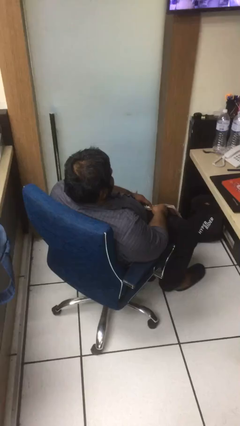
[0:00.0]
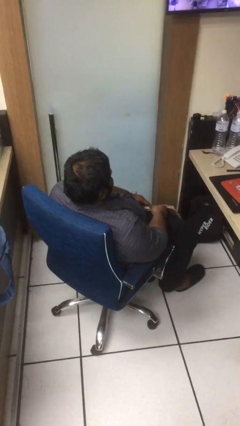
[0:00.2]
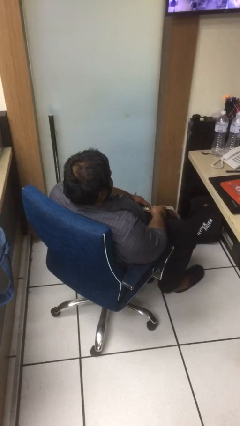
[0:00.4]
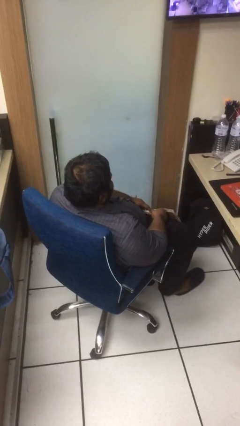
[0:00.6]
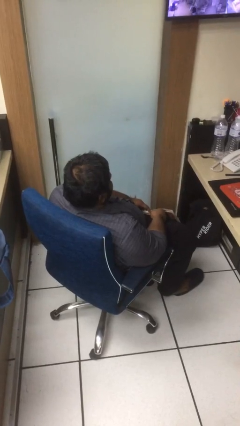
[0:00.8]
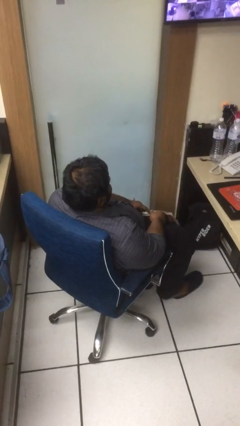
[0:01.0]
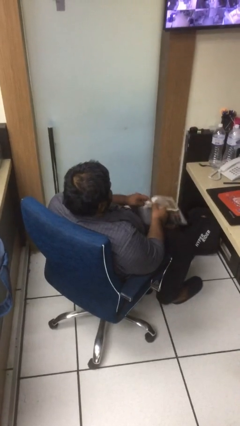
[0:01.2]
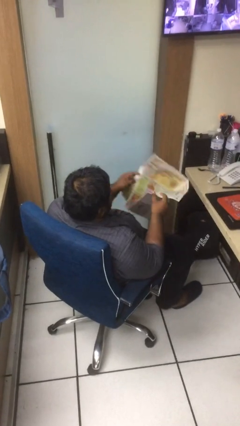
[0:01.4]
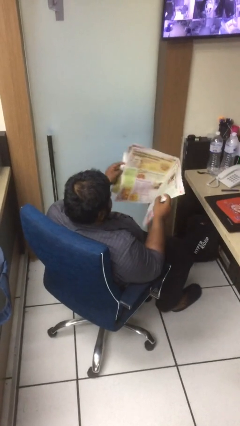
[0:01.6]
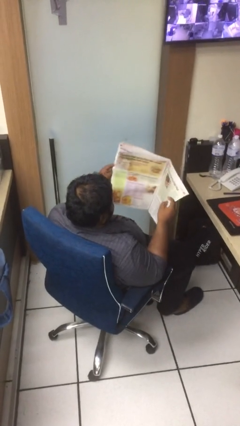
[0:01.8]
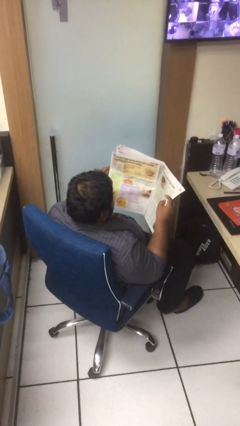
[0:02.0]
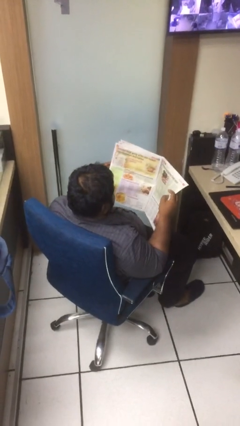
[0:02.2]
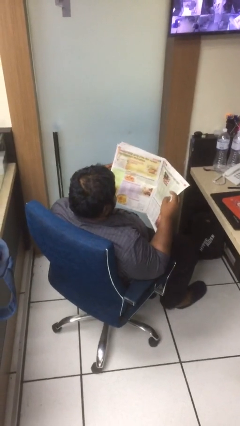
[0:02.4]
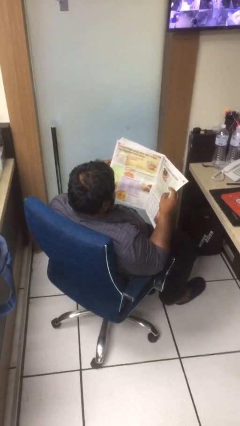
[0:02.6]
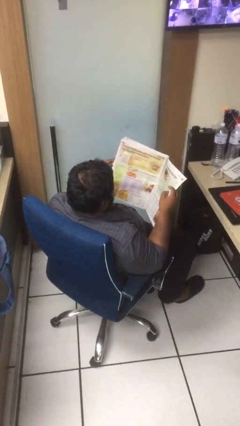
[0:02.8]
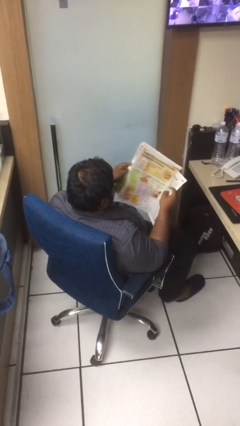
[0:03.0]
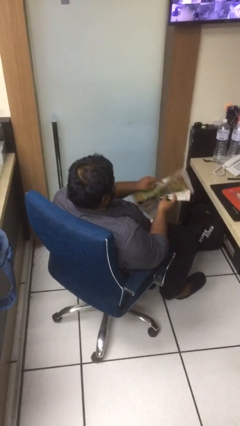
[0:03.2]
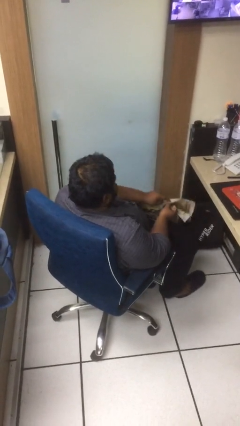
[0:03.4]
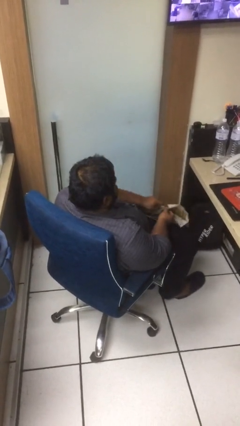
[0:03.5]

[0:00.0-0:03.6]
person reads newspaper

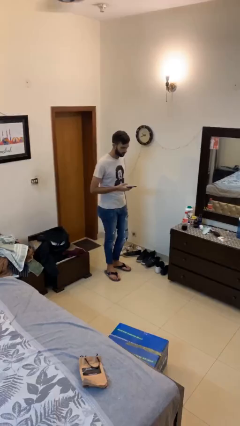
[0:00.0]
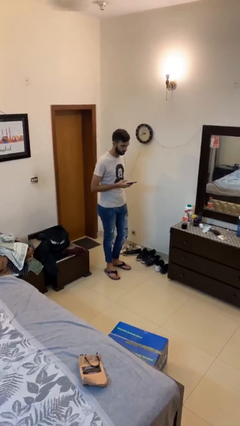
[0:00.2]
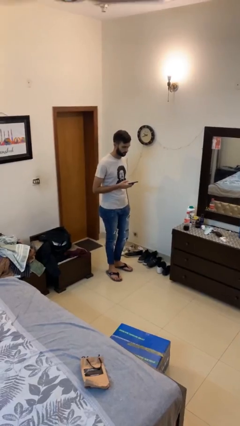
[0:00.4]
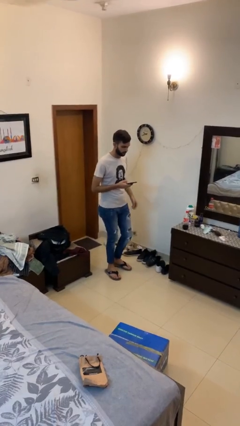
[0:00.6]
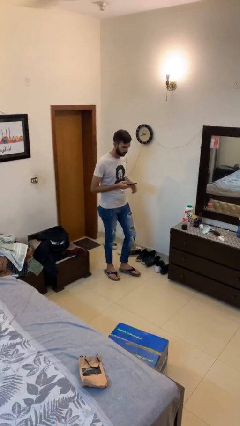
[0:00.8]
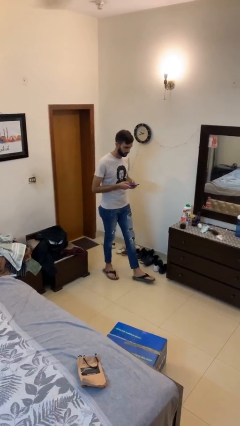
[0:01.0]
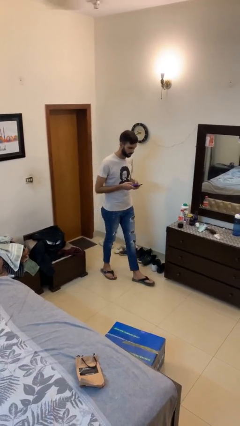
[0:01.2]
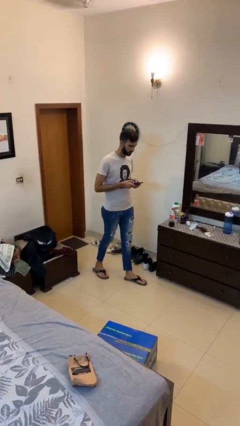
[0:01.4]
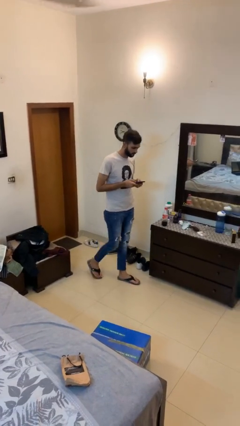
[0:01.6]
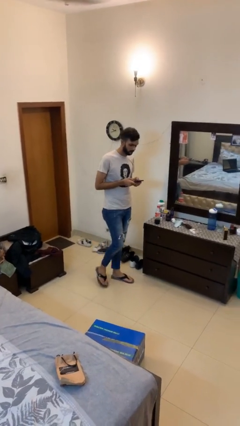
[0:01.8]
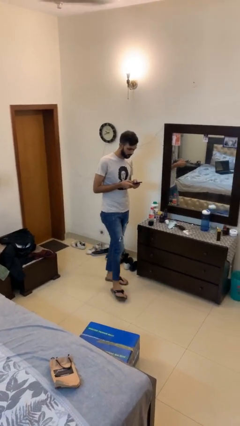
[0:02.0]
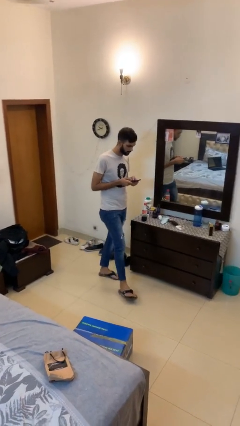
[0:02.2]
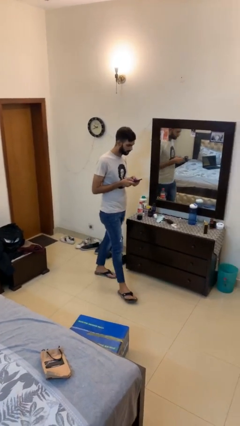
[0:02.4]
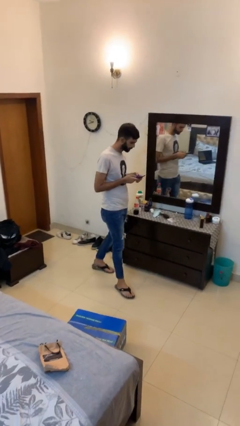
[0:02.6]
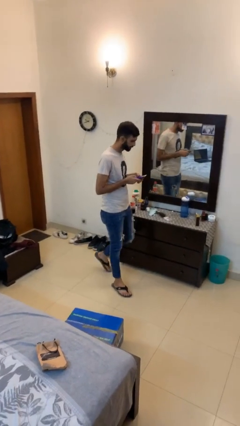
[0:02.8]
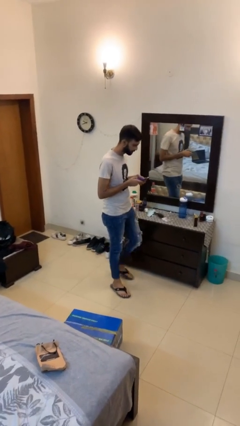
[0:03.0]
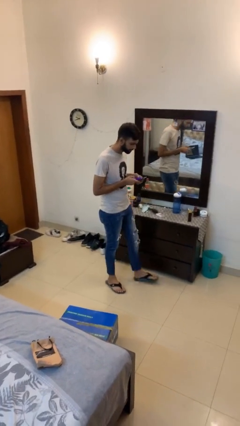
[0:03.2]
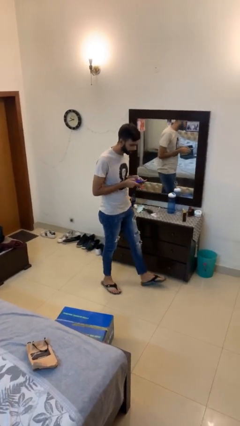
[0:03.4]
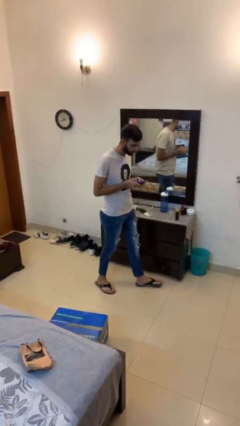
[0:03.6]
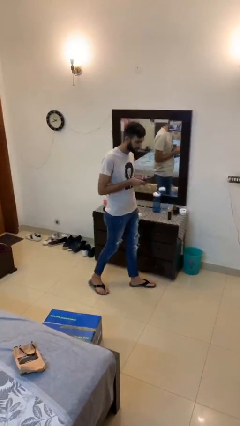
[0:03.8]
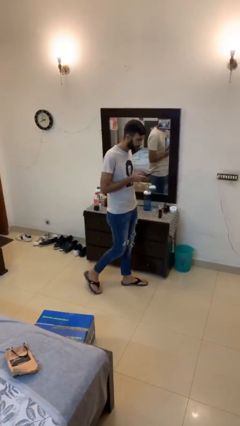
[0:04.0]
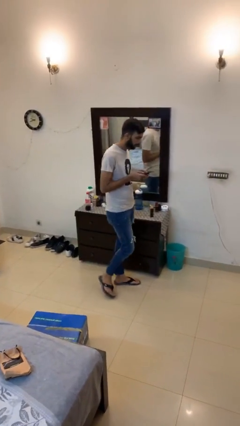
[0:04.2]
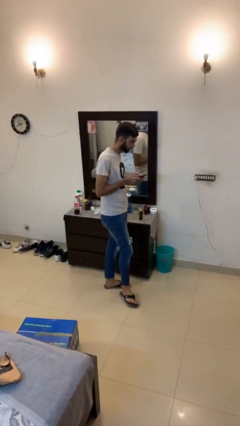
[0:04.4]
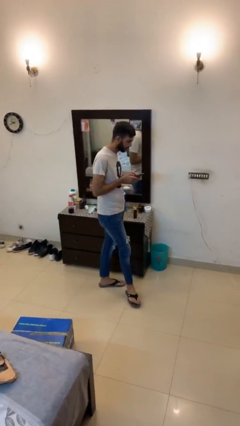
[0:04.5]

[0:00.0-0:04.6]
person texts on phone

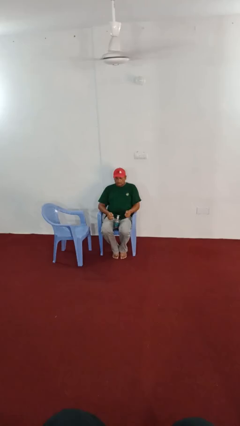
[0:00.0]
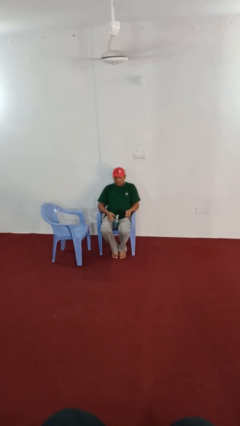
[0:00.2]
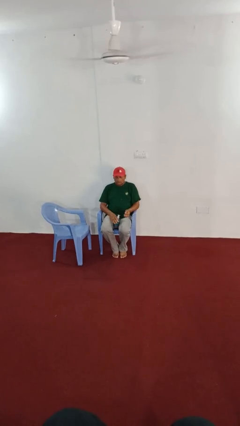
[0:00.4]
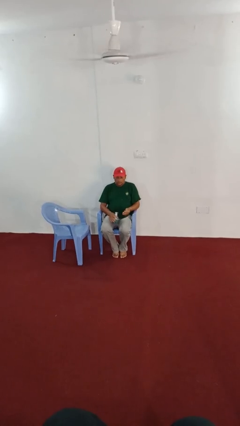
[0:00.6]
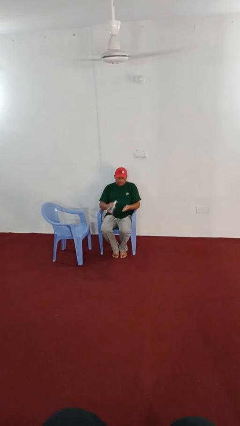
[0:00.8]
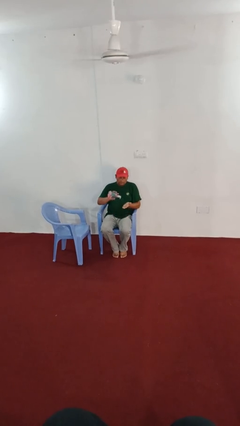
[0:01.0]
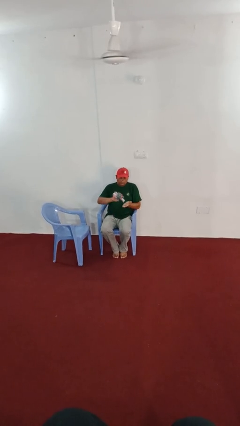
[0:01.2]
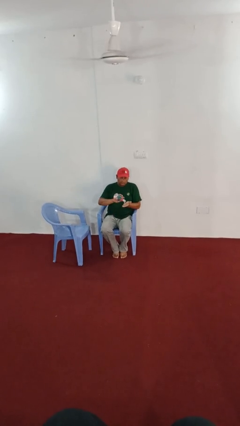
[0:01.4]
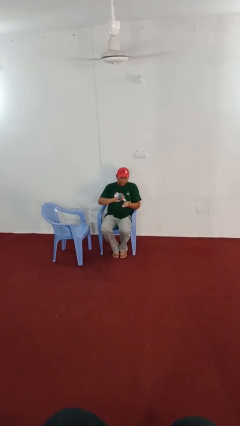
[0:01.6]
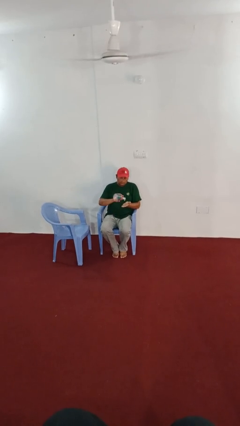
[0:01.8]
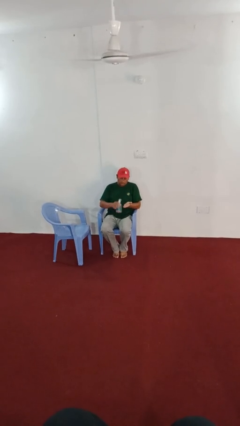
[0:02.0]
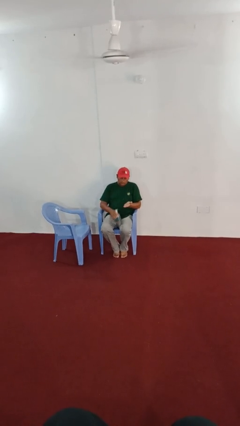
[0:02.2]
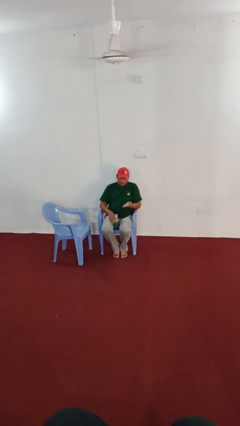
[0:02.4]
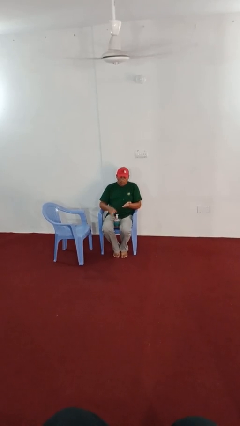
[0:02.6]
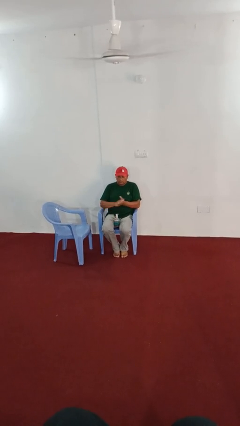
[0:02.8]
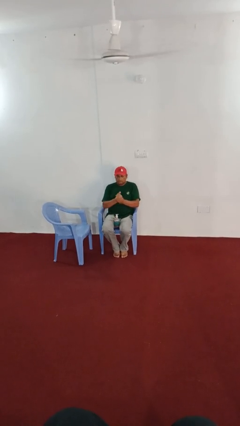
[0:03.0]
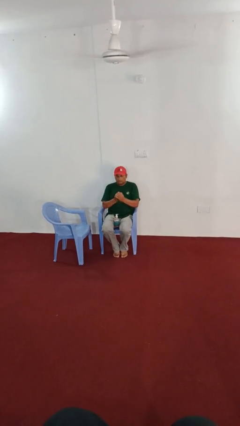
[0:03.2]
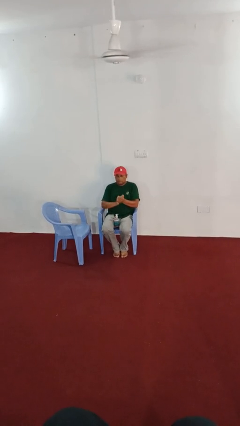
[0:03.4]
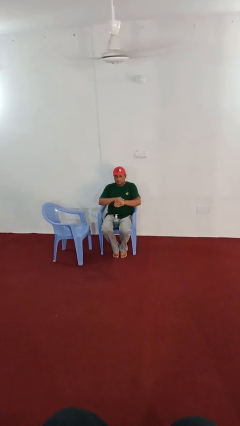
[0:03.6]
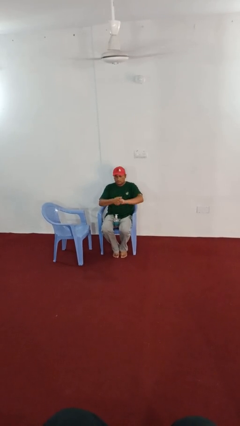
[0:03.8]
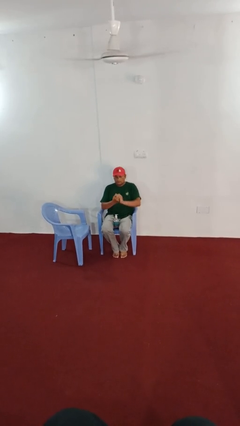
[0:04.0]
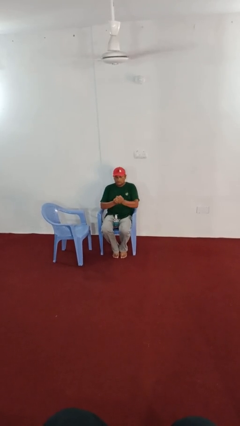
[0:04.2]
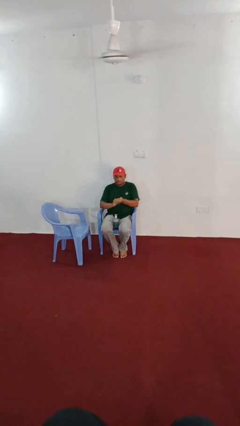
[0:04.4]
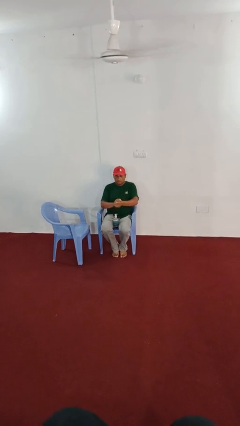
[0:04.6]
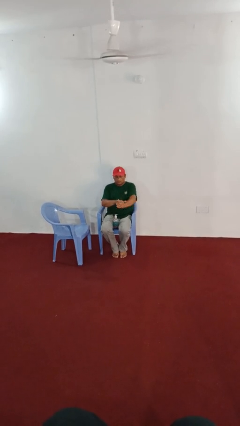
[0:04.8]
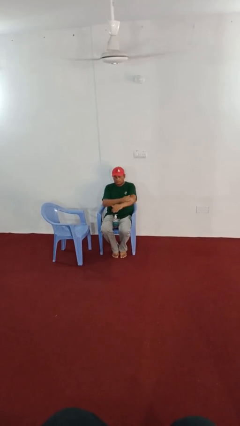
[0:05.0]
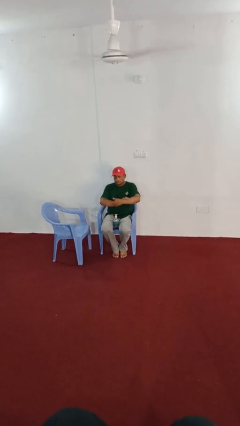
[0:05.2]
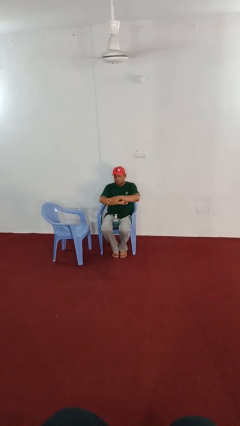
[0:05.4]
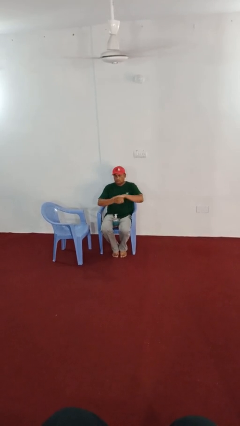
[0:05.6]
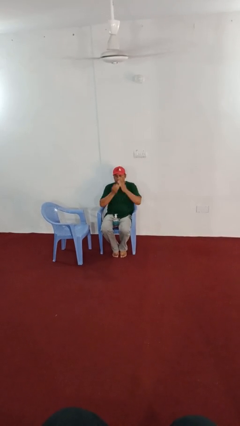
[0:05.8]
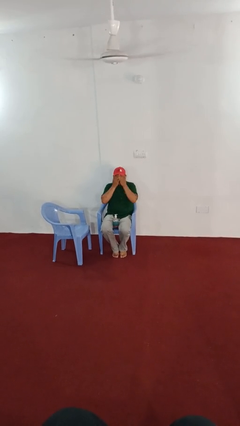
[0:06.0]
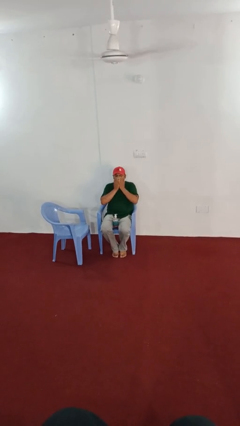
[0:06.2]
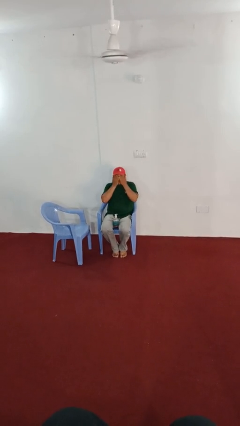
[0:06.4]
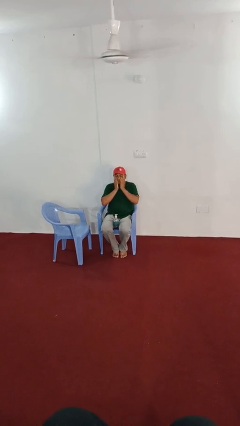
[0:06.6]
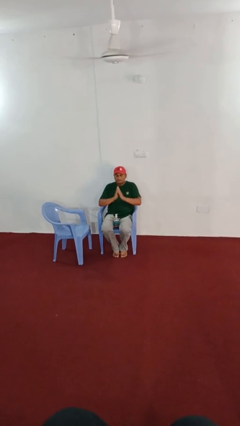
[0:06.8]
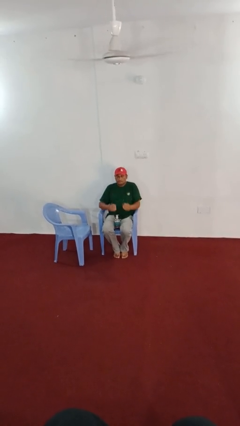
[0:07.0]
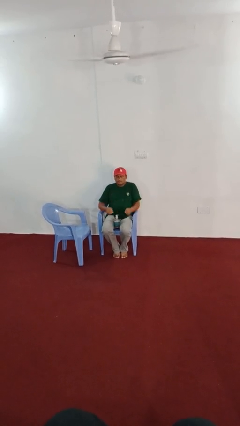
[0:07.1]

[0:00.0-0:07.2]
person applies sunscreen

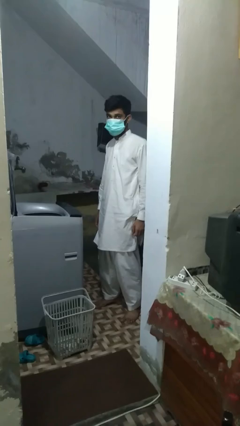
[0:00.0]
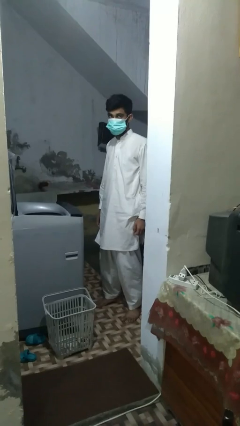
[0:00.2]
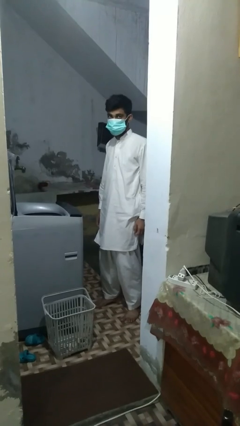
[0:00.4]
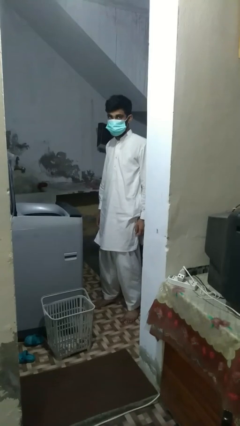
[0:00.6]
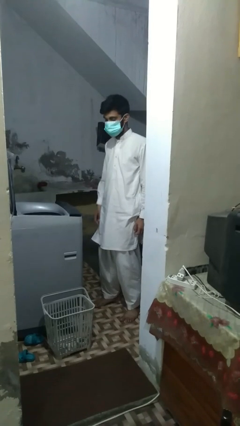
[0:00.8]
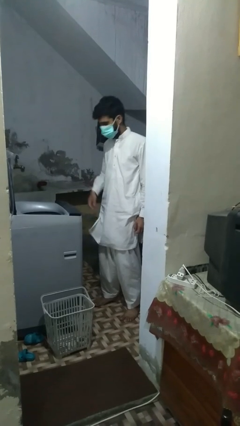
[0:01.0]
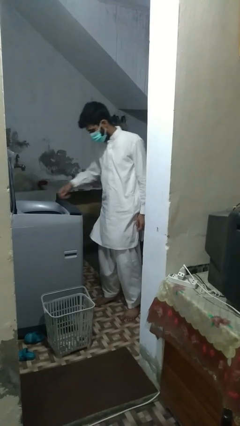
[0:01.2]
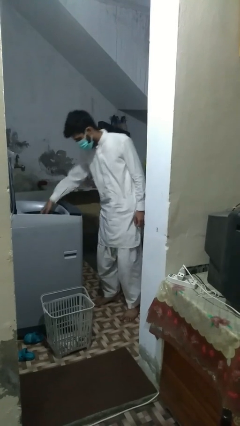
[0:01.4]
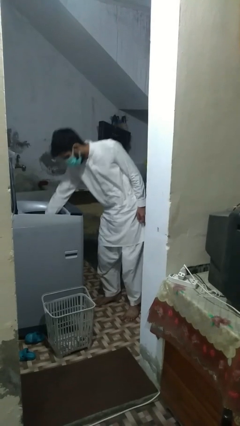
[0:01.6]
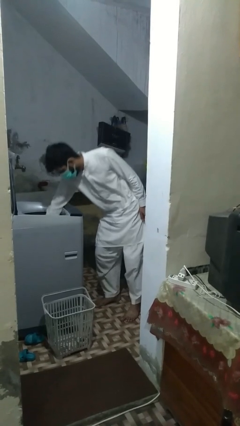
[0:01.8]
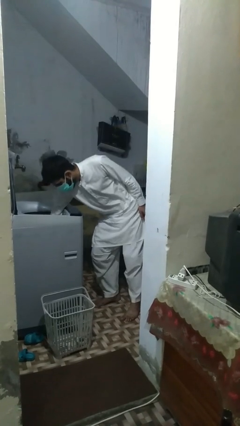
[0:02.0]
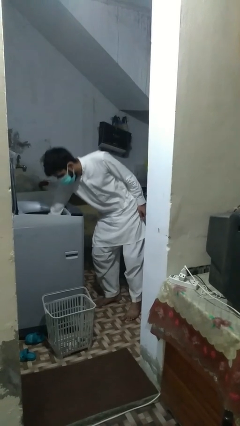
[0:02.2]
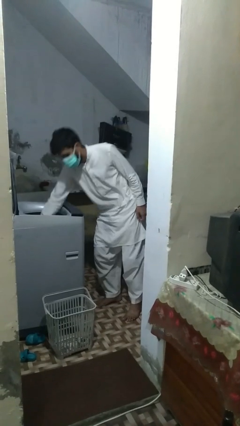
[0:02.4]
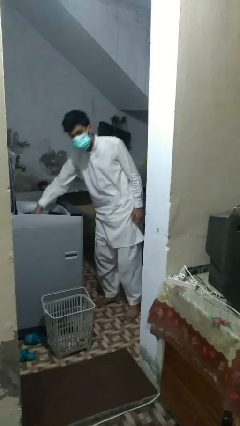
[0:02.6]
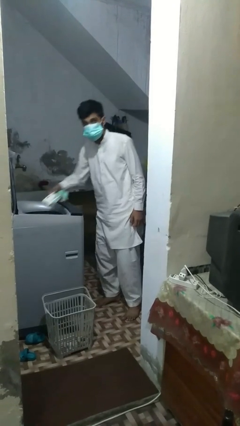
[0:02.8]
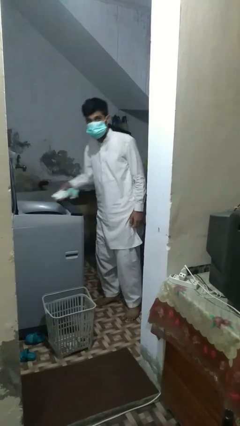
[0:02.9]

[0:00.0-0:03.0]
person unloads dryer
